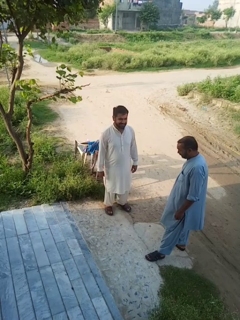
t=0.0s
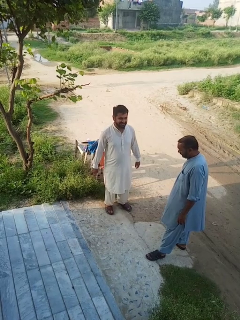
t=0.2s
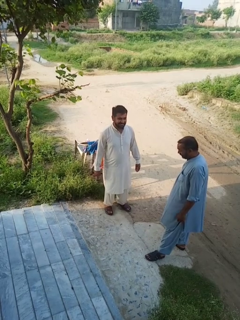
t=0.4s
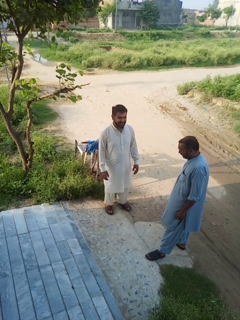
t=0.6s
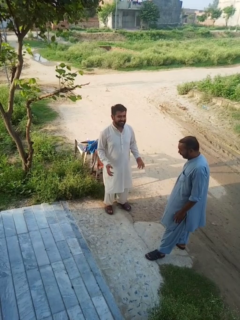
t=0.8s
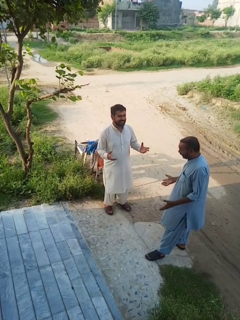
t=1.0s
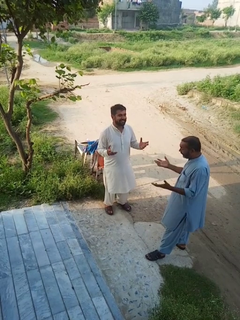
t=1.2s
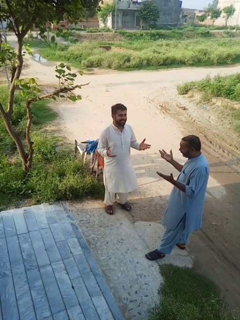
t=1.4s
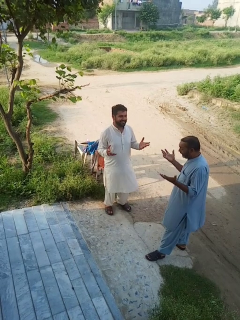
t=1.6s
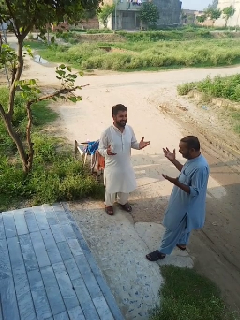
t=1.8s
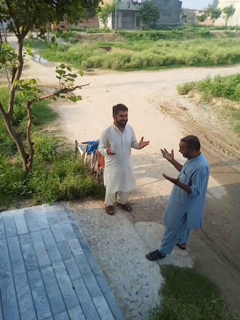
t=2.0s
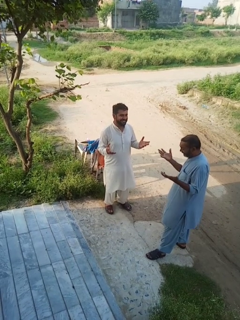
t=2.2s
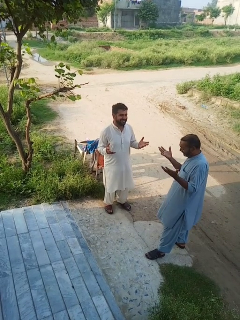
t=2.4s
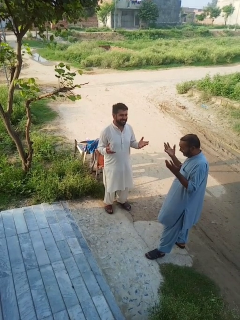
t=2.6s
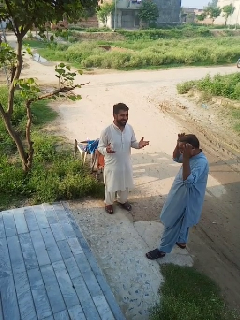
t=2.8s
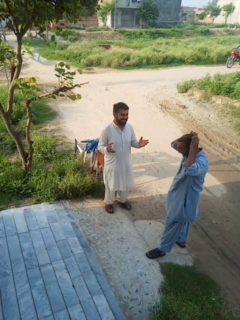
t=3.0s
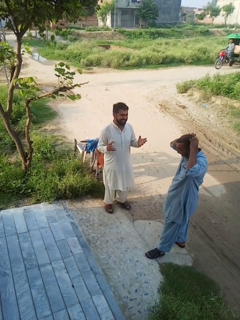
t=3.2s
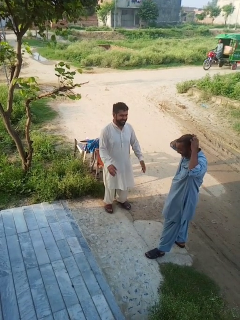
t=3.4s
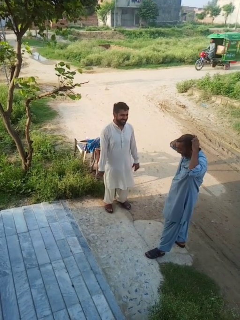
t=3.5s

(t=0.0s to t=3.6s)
person laughs with person

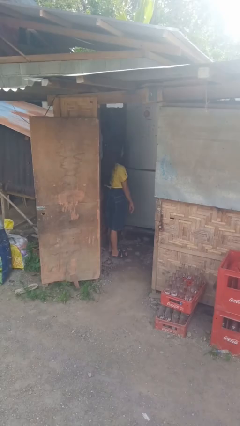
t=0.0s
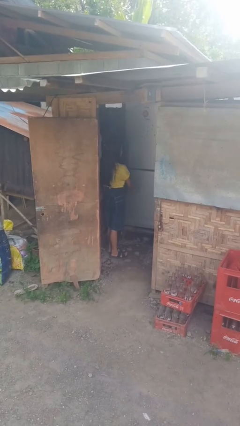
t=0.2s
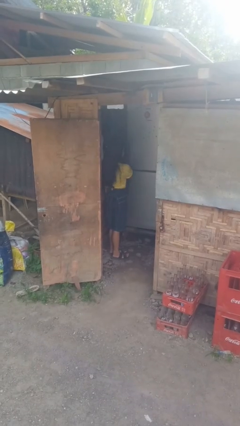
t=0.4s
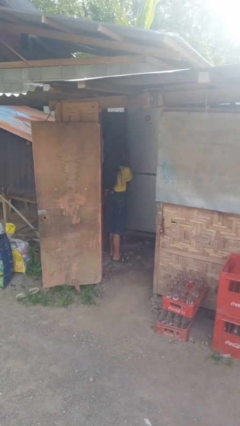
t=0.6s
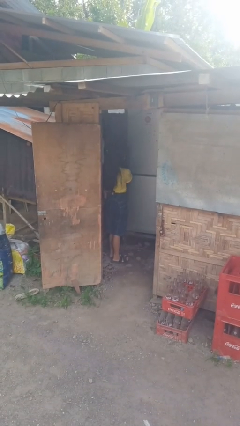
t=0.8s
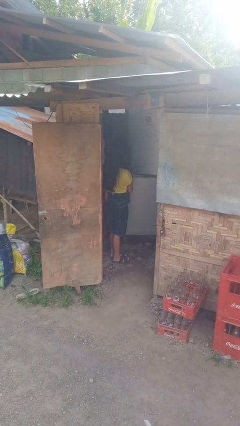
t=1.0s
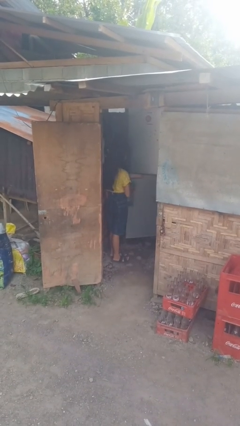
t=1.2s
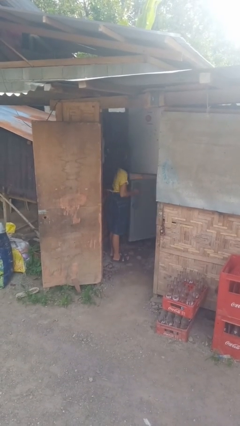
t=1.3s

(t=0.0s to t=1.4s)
person opens refrigerator

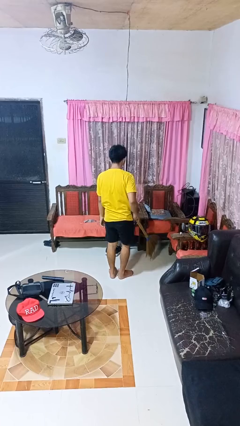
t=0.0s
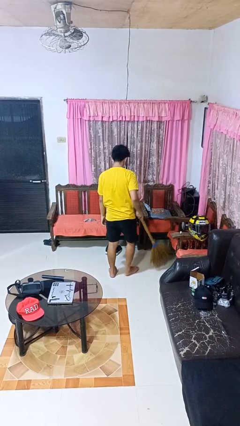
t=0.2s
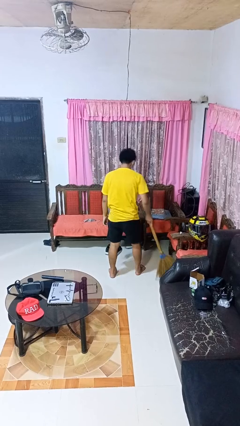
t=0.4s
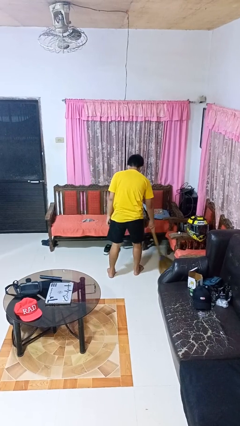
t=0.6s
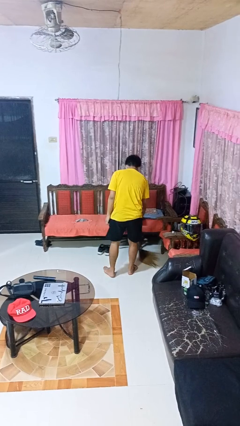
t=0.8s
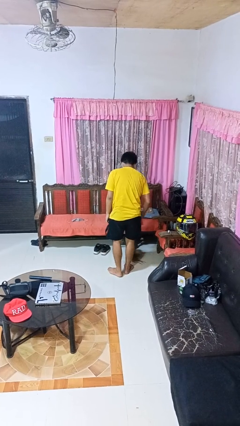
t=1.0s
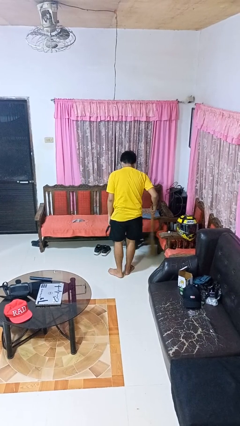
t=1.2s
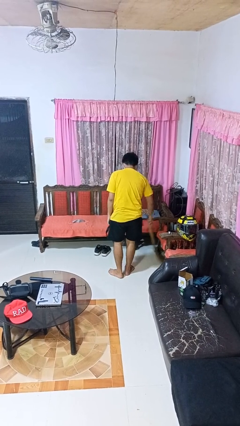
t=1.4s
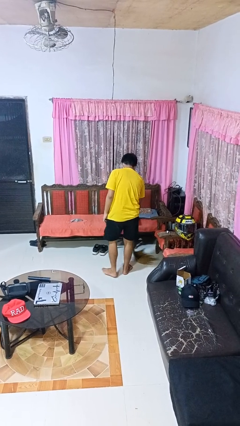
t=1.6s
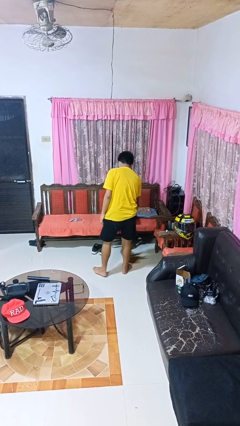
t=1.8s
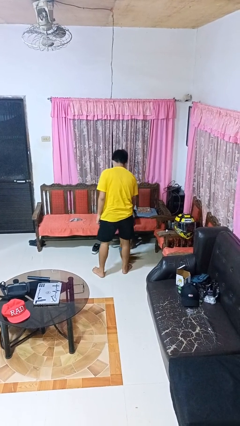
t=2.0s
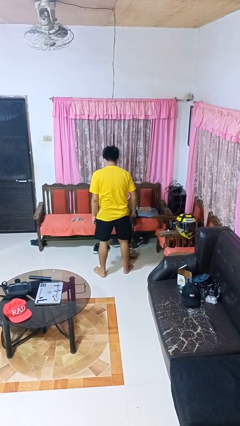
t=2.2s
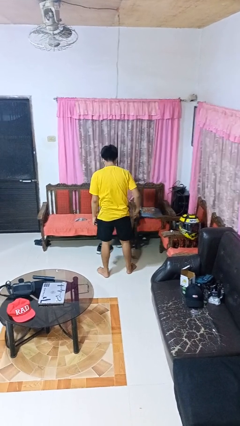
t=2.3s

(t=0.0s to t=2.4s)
person sweeps floor

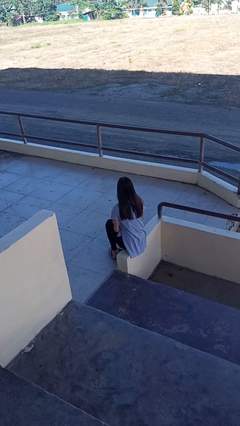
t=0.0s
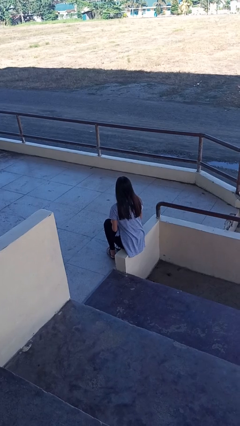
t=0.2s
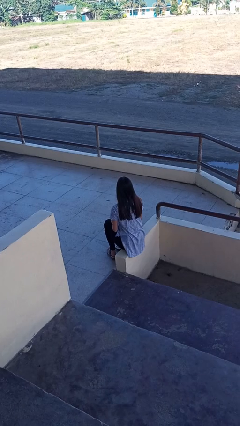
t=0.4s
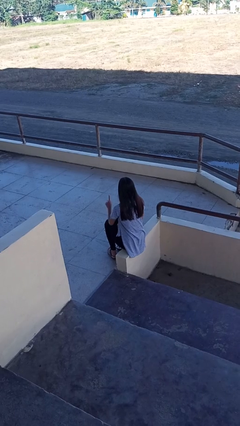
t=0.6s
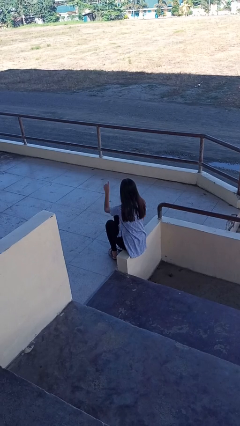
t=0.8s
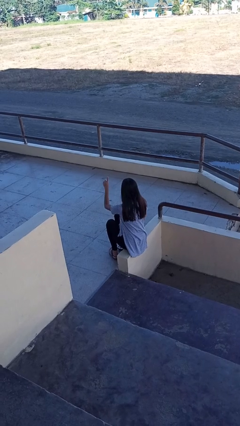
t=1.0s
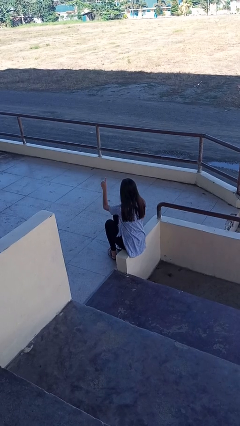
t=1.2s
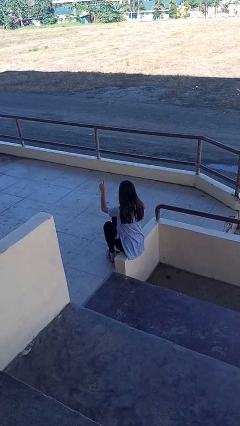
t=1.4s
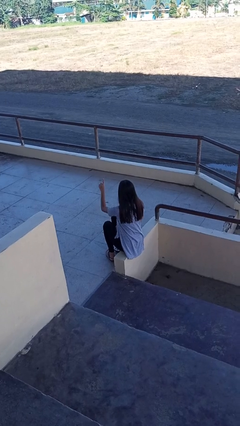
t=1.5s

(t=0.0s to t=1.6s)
person gestures number one

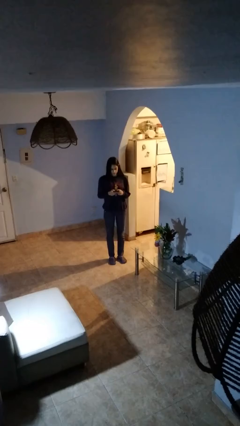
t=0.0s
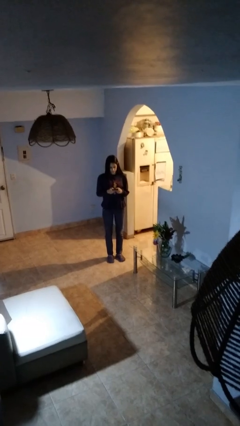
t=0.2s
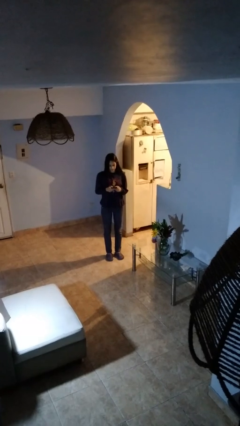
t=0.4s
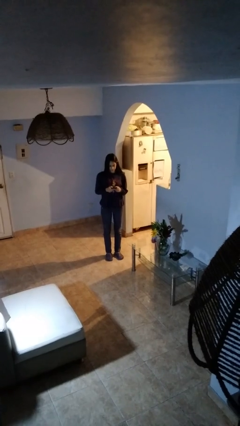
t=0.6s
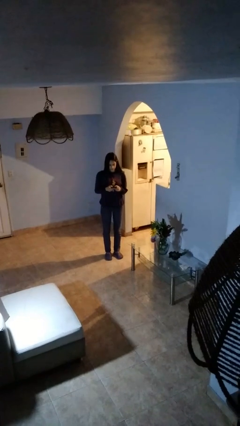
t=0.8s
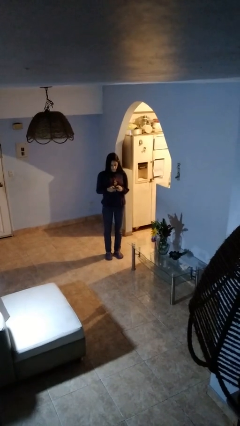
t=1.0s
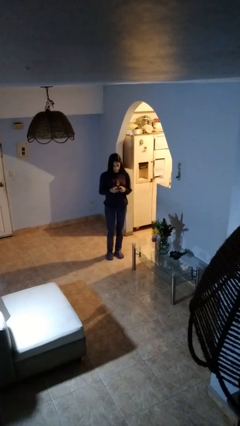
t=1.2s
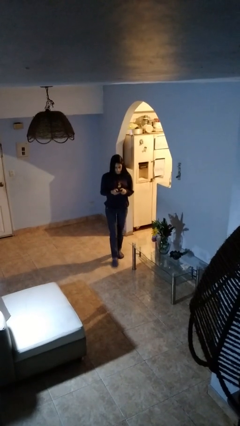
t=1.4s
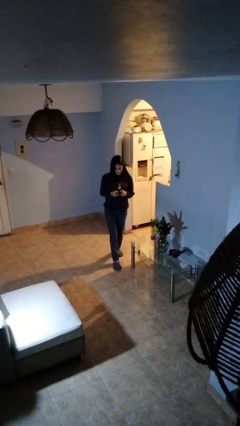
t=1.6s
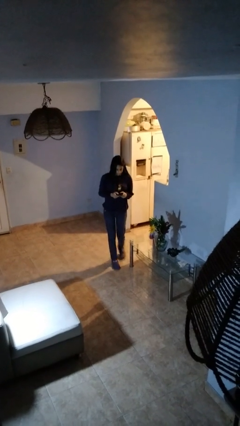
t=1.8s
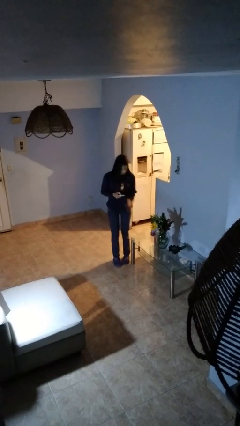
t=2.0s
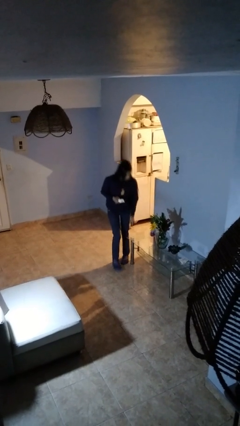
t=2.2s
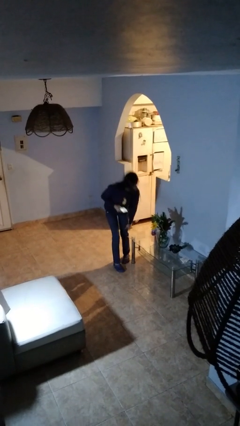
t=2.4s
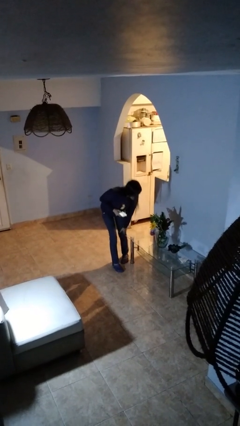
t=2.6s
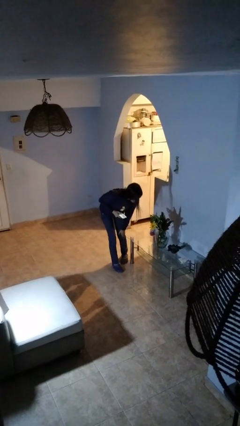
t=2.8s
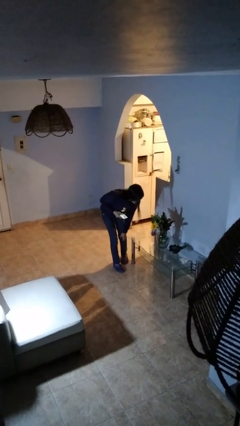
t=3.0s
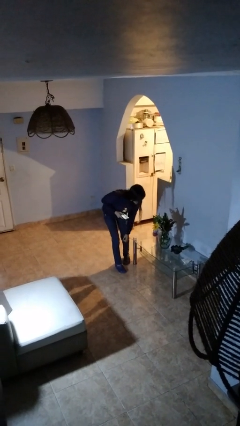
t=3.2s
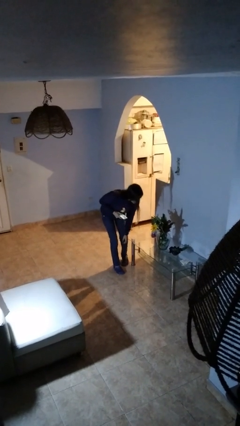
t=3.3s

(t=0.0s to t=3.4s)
person bumps into table

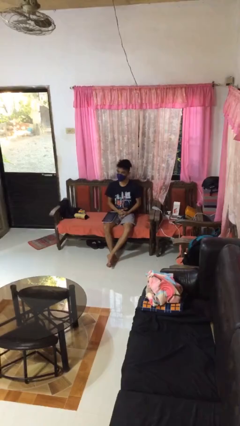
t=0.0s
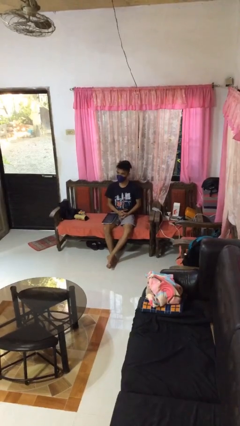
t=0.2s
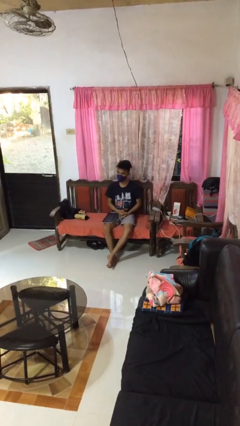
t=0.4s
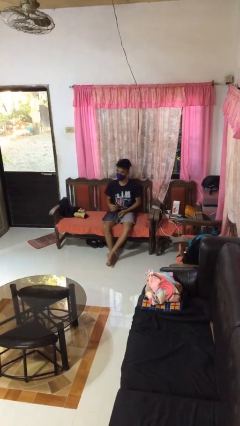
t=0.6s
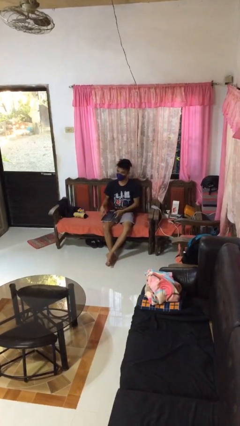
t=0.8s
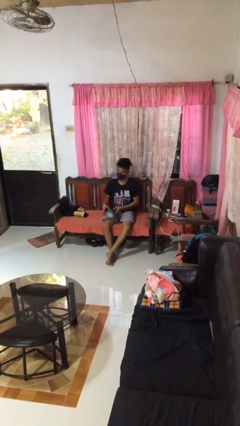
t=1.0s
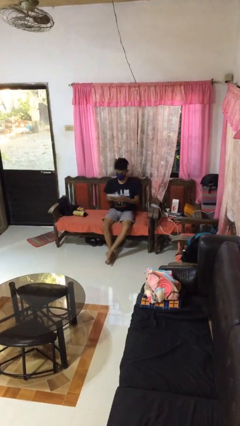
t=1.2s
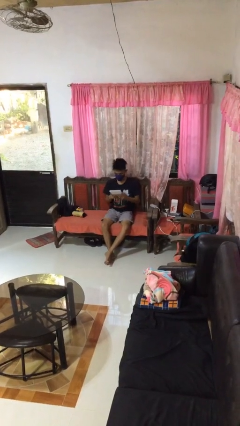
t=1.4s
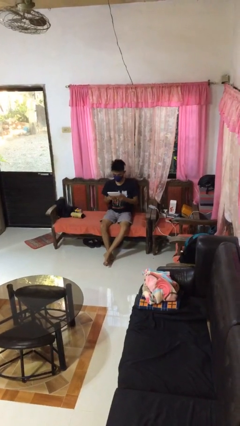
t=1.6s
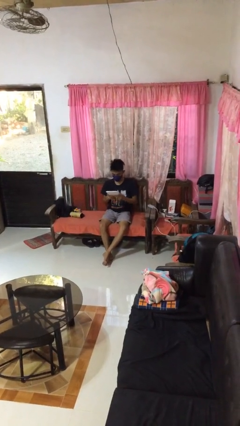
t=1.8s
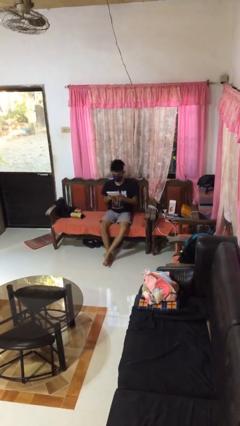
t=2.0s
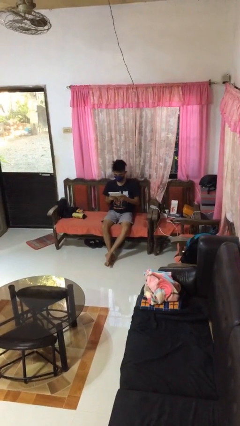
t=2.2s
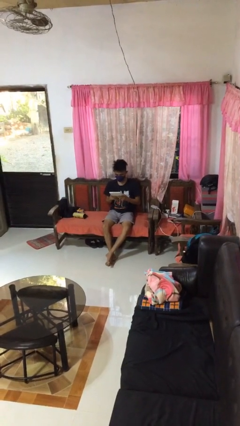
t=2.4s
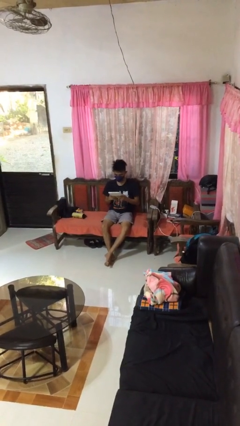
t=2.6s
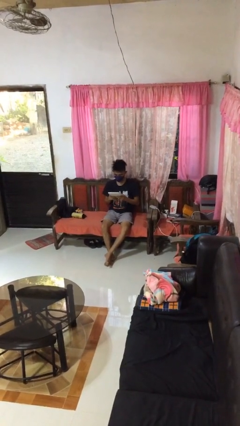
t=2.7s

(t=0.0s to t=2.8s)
person interacts with tablet

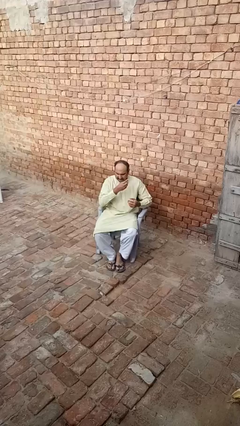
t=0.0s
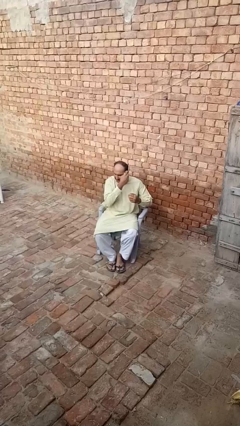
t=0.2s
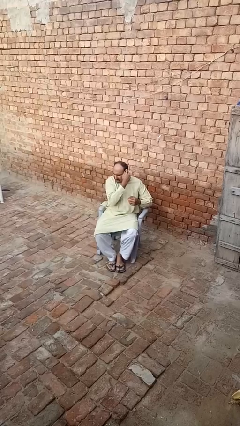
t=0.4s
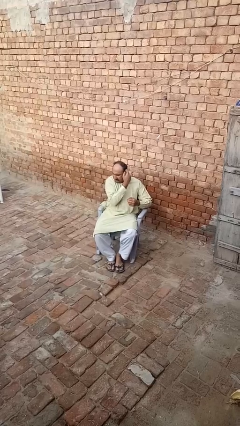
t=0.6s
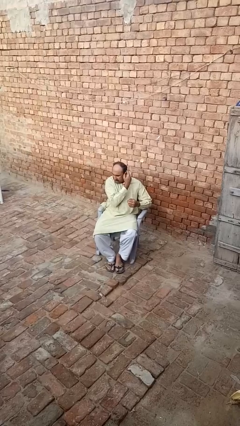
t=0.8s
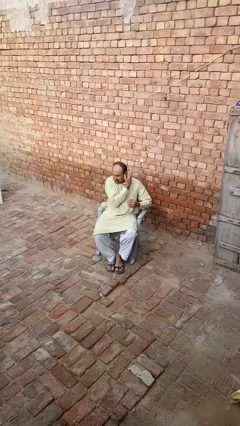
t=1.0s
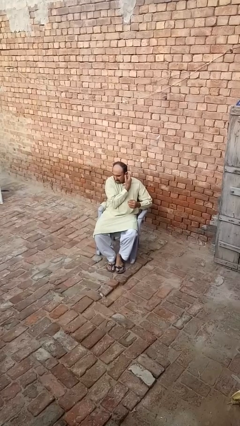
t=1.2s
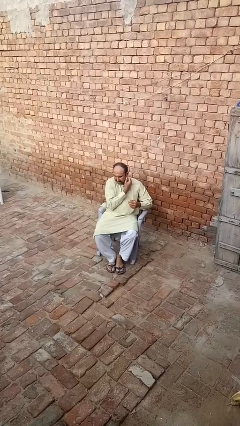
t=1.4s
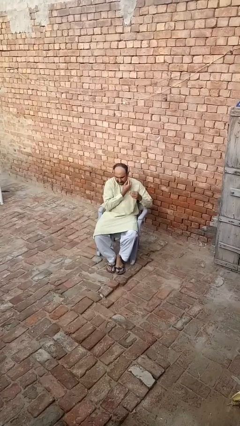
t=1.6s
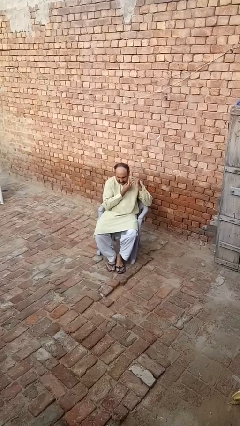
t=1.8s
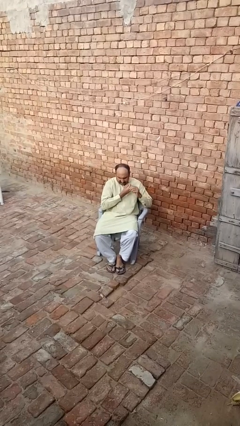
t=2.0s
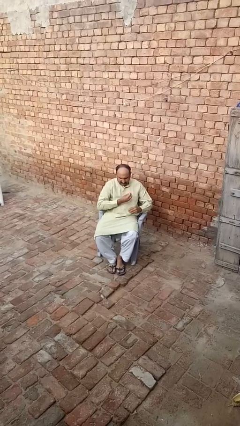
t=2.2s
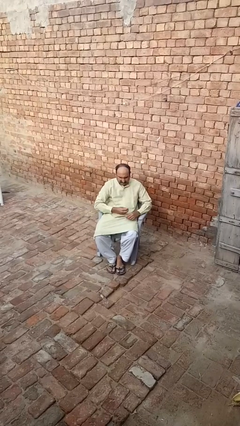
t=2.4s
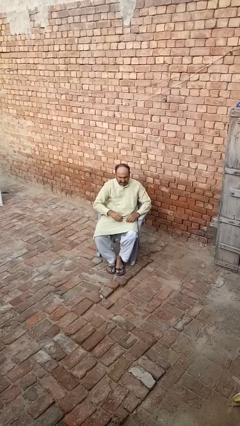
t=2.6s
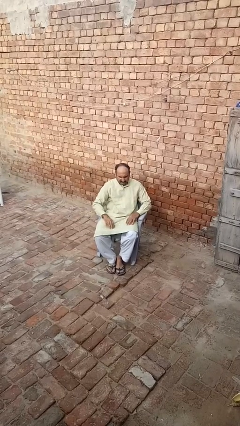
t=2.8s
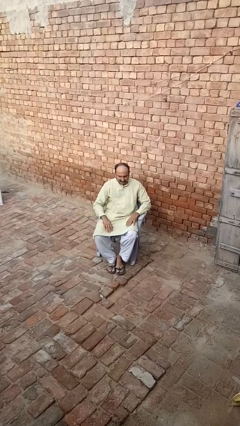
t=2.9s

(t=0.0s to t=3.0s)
person puts on earrings
